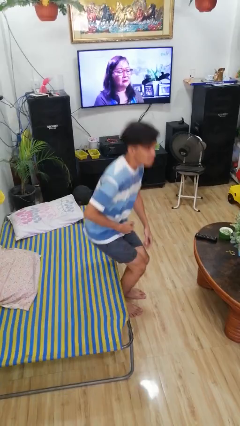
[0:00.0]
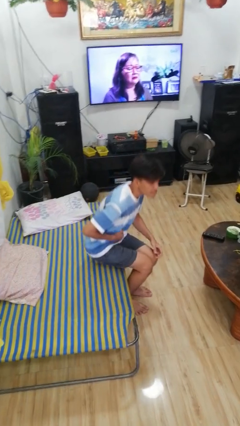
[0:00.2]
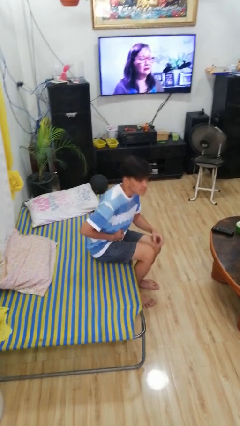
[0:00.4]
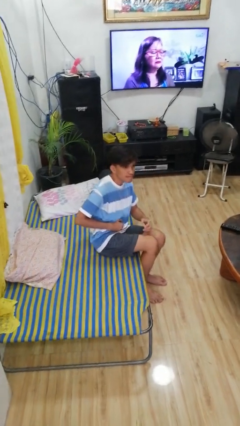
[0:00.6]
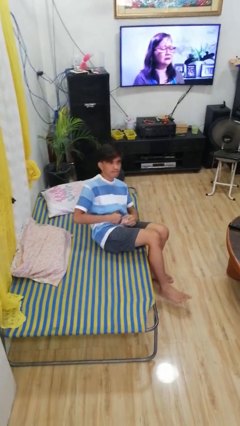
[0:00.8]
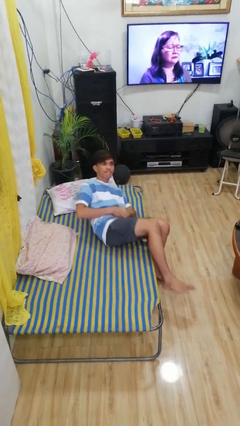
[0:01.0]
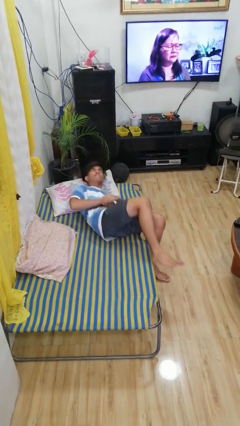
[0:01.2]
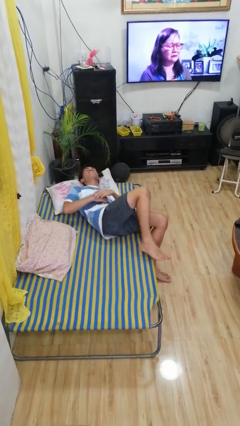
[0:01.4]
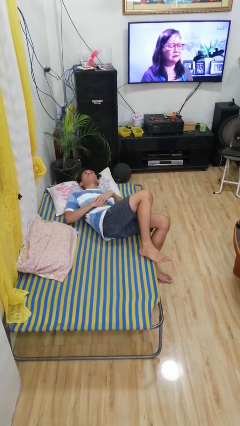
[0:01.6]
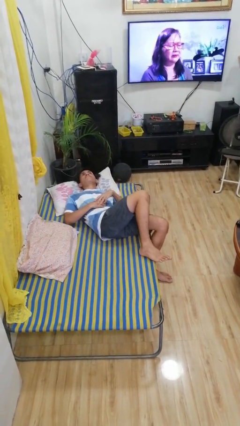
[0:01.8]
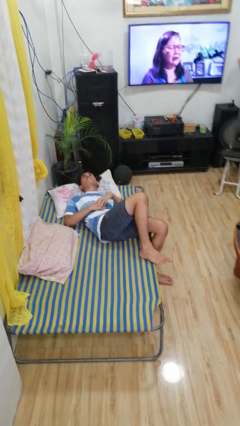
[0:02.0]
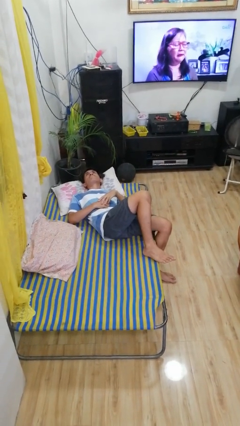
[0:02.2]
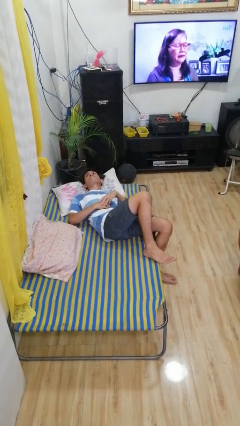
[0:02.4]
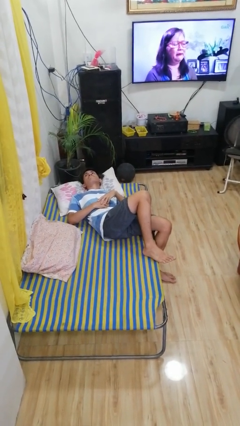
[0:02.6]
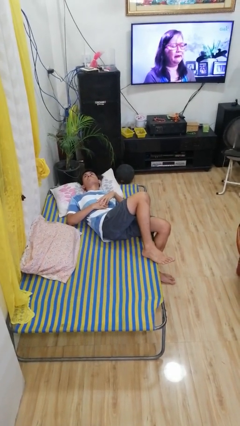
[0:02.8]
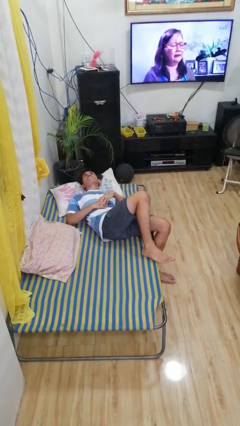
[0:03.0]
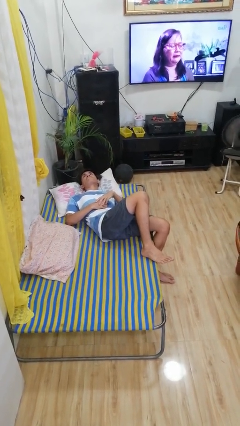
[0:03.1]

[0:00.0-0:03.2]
person lies down on bed

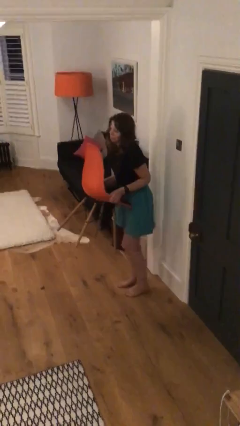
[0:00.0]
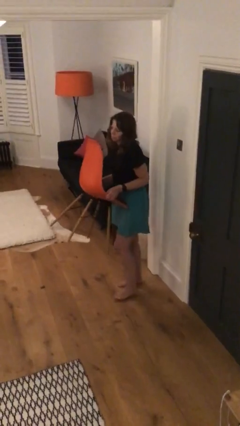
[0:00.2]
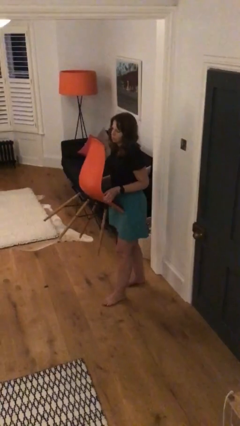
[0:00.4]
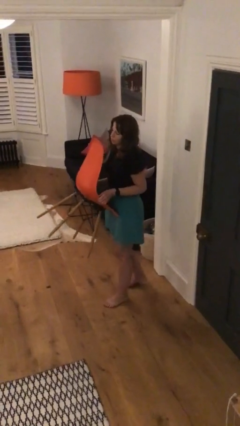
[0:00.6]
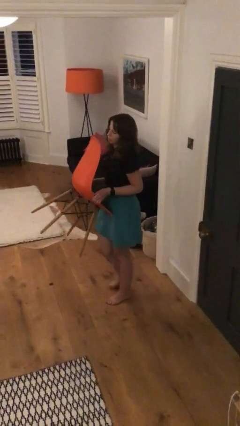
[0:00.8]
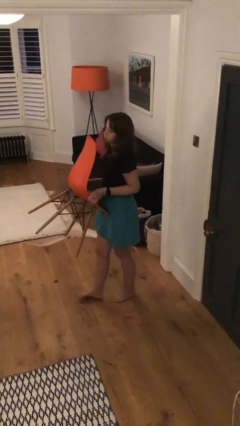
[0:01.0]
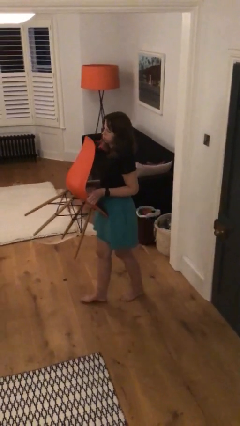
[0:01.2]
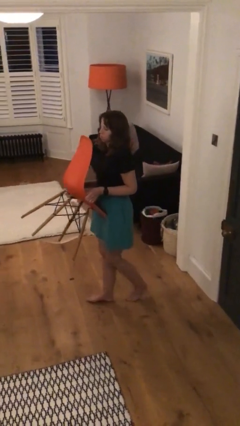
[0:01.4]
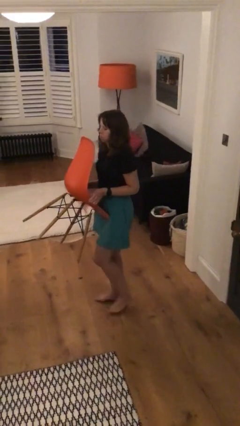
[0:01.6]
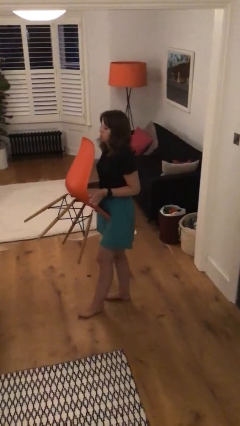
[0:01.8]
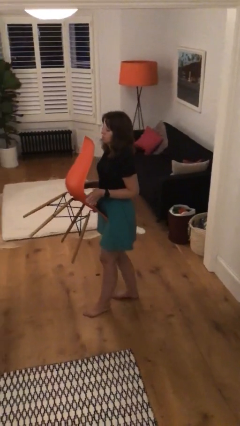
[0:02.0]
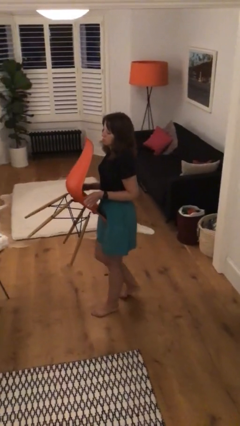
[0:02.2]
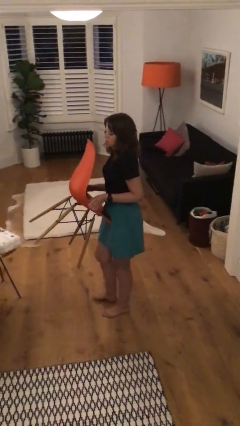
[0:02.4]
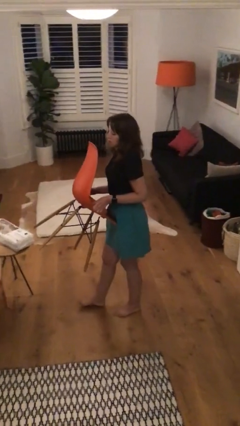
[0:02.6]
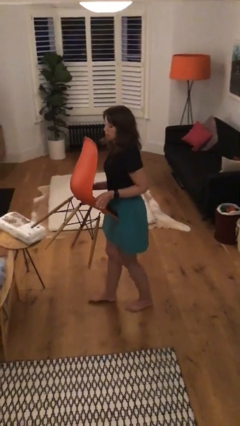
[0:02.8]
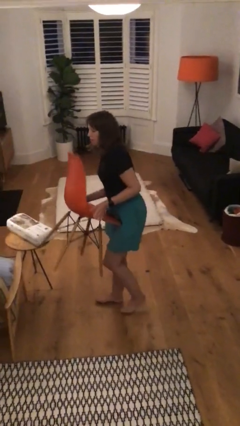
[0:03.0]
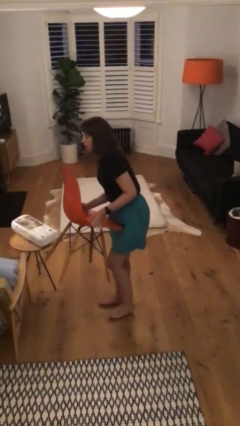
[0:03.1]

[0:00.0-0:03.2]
person carries heavy object

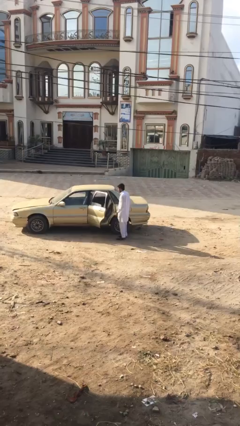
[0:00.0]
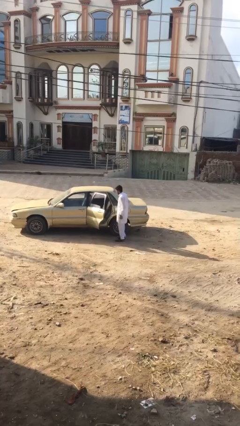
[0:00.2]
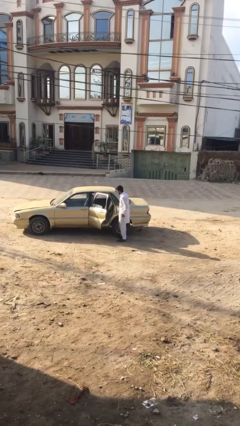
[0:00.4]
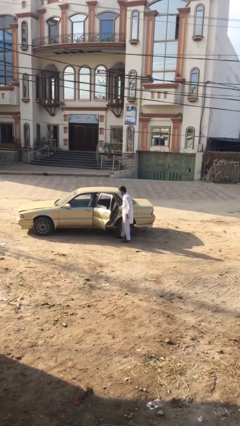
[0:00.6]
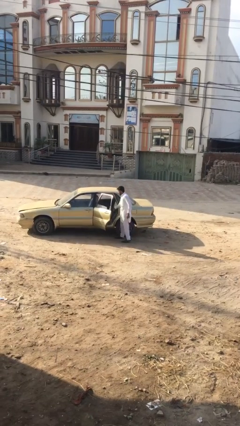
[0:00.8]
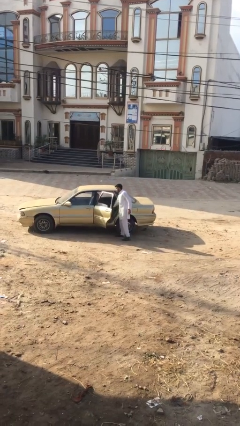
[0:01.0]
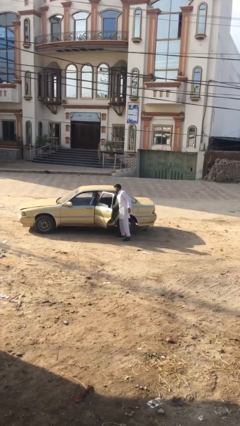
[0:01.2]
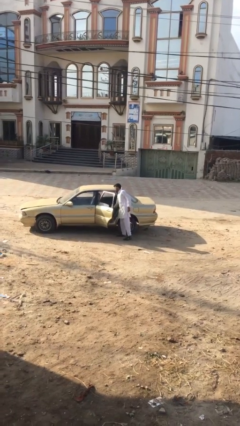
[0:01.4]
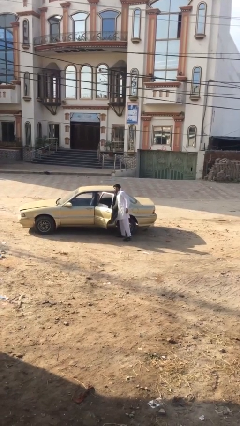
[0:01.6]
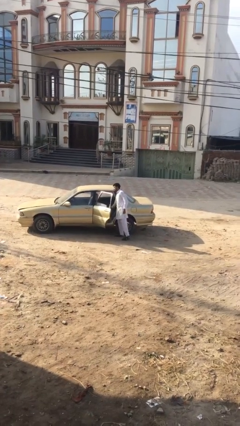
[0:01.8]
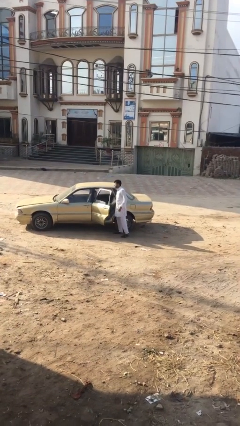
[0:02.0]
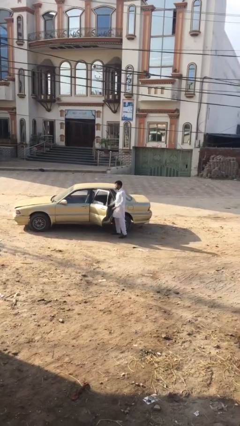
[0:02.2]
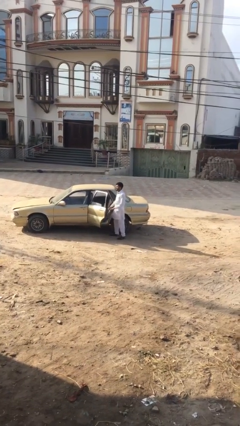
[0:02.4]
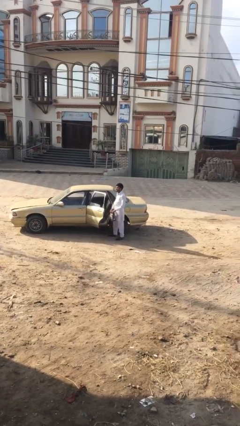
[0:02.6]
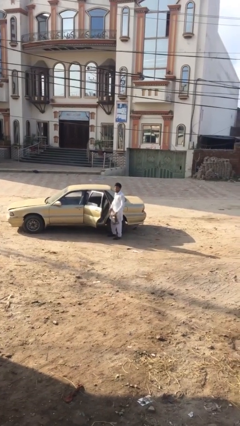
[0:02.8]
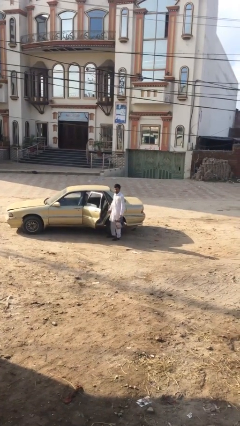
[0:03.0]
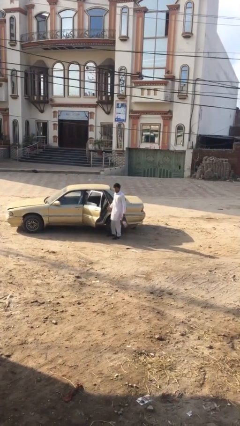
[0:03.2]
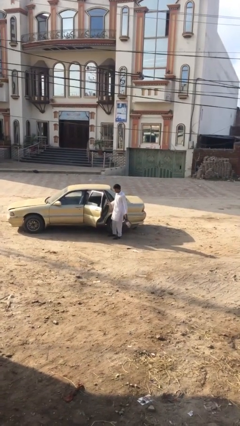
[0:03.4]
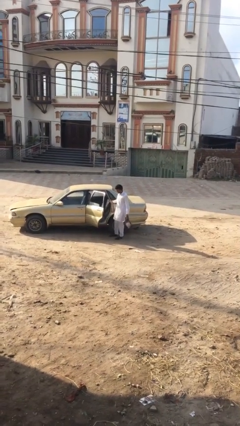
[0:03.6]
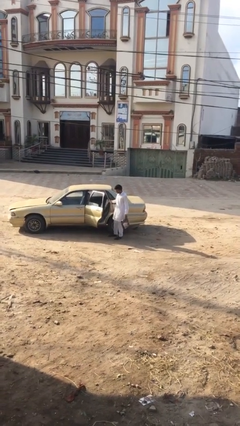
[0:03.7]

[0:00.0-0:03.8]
person unloads car

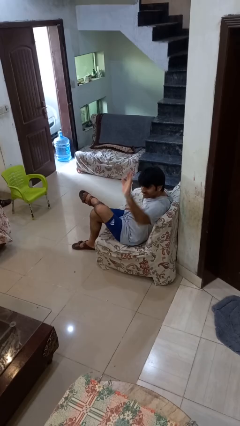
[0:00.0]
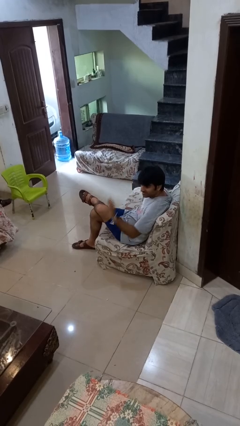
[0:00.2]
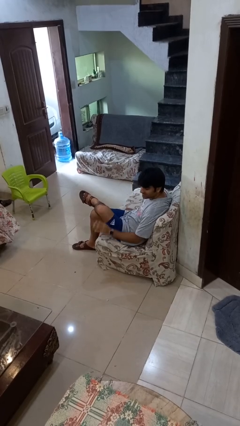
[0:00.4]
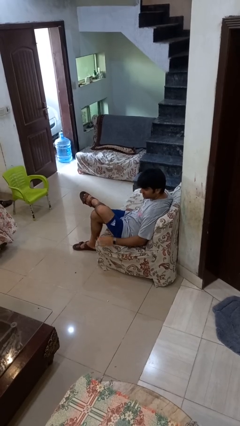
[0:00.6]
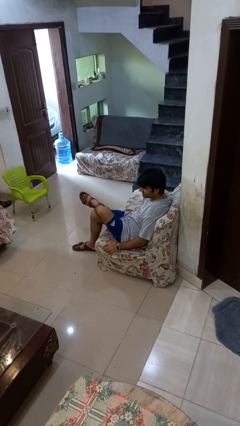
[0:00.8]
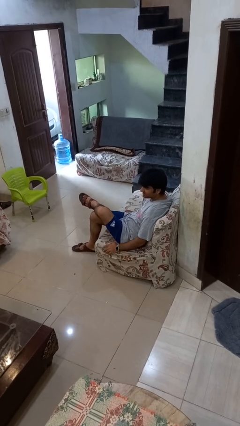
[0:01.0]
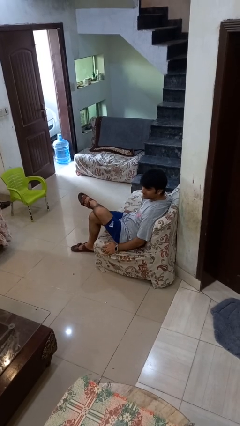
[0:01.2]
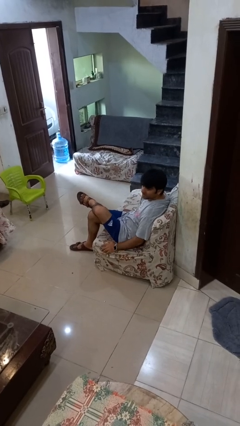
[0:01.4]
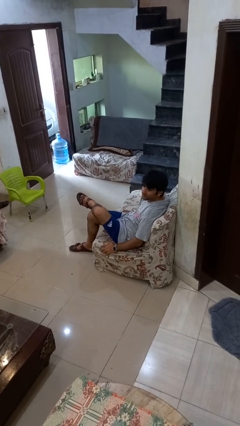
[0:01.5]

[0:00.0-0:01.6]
person gestures lower hand

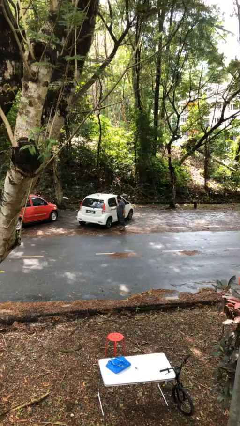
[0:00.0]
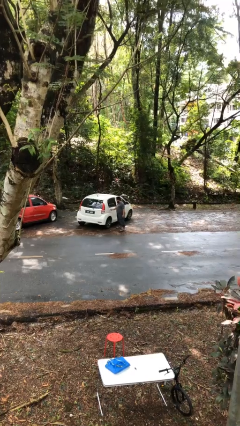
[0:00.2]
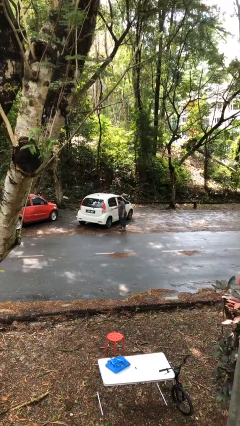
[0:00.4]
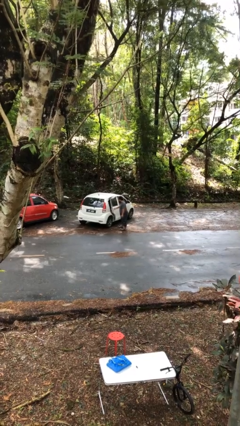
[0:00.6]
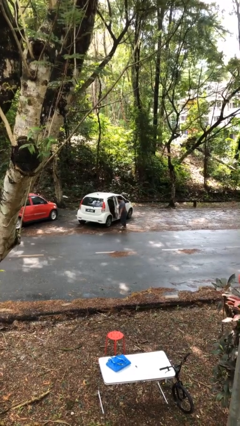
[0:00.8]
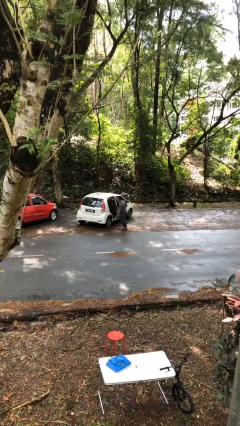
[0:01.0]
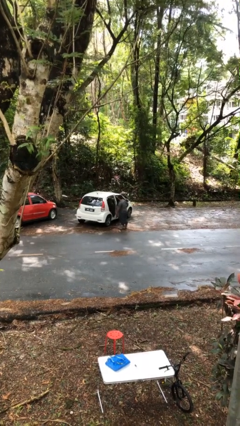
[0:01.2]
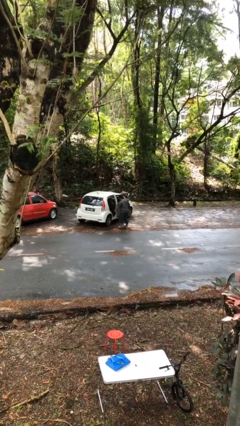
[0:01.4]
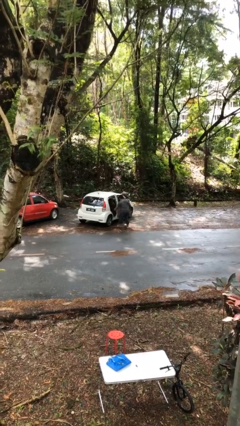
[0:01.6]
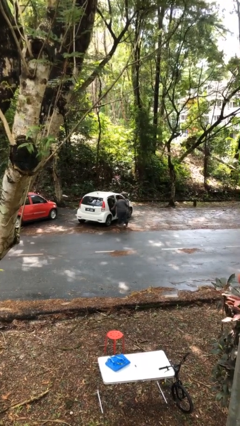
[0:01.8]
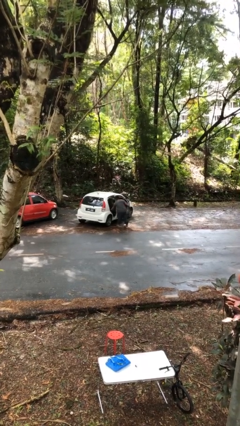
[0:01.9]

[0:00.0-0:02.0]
person opens car door

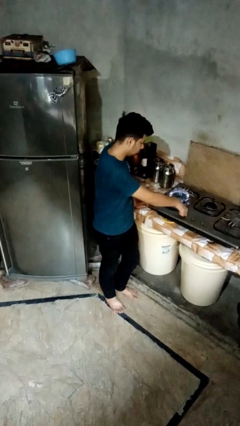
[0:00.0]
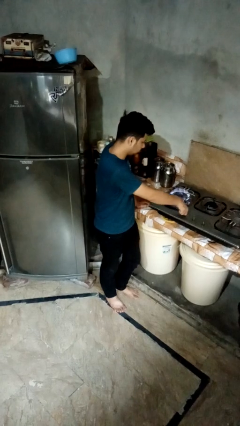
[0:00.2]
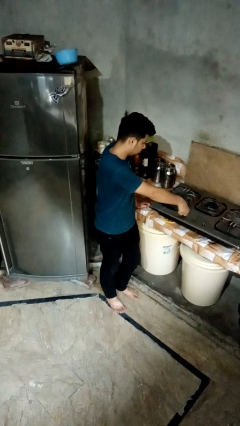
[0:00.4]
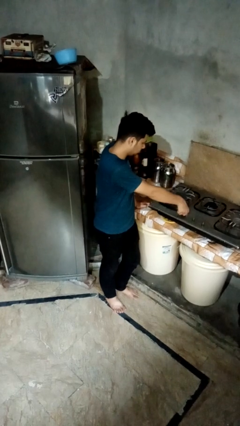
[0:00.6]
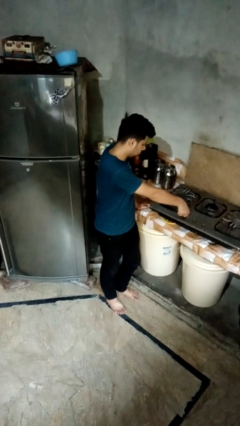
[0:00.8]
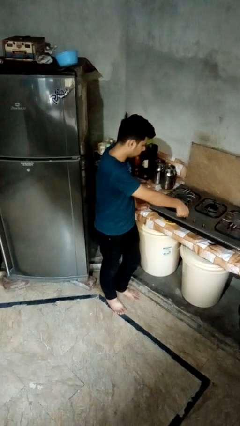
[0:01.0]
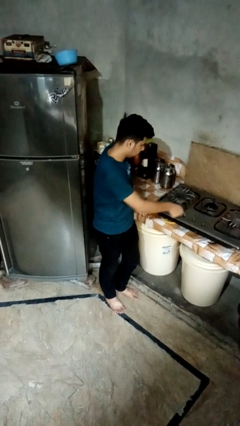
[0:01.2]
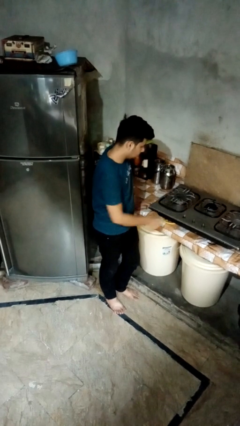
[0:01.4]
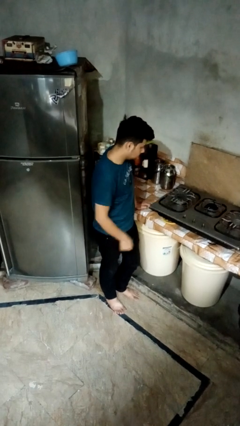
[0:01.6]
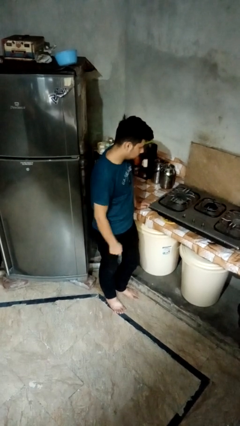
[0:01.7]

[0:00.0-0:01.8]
person turns off stovetop

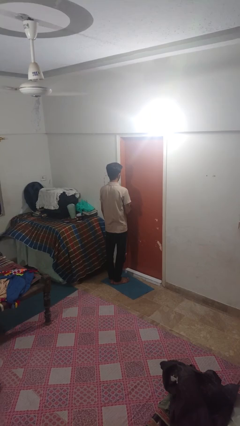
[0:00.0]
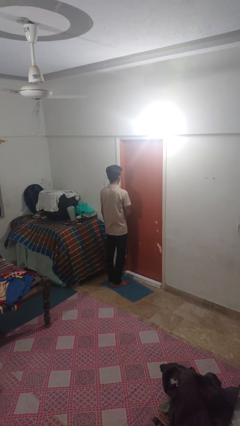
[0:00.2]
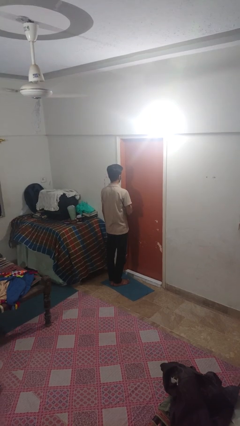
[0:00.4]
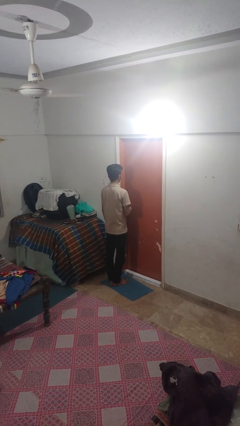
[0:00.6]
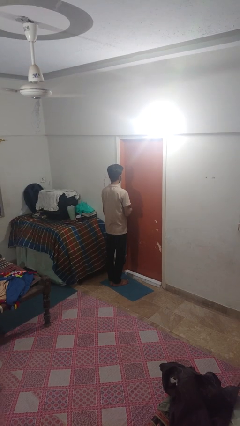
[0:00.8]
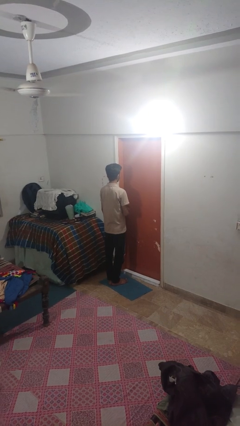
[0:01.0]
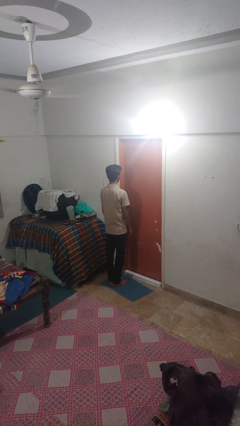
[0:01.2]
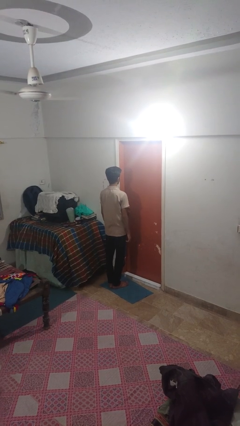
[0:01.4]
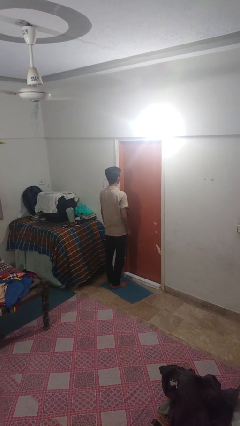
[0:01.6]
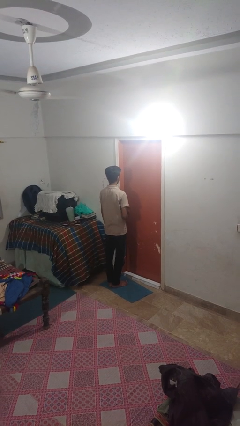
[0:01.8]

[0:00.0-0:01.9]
person unlocks door with keys
